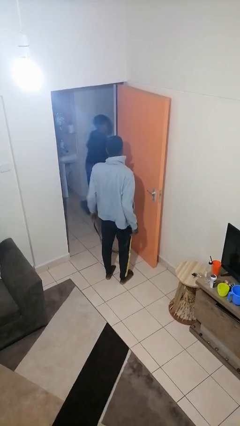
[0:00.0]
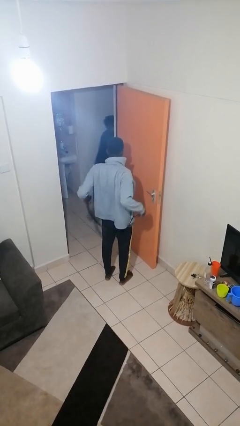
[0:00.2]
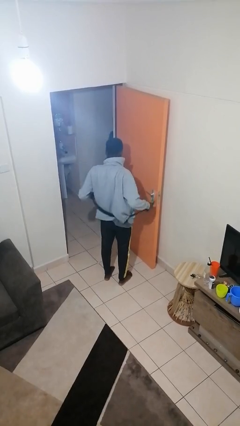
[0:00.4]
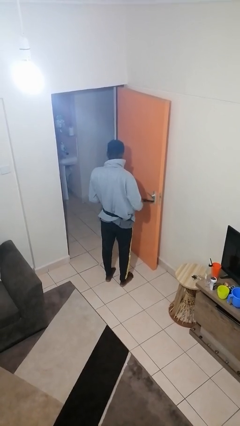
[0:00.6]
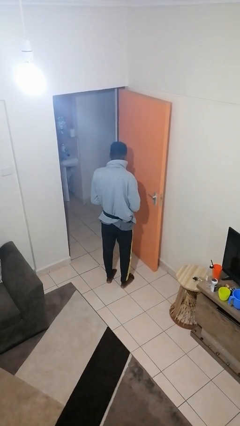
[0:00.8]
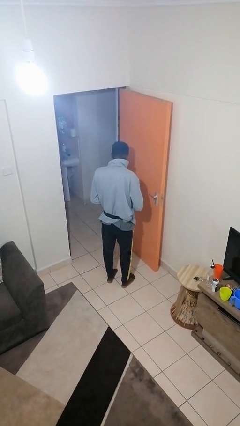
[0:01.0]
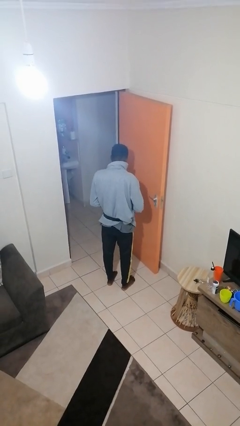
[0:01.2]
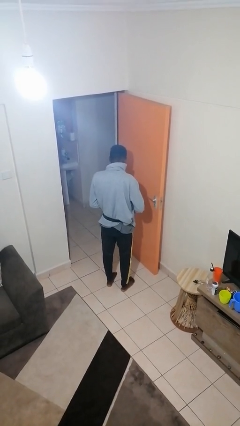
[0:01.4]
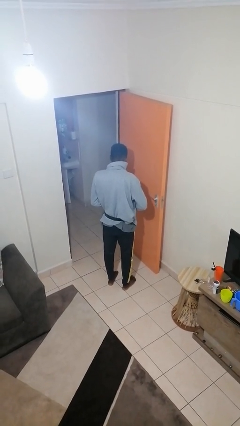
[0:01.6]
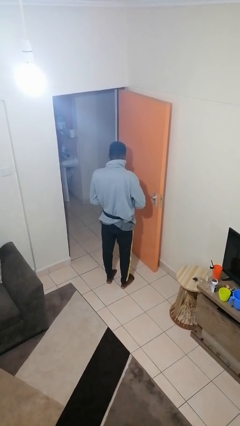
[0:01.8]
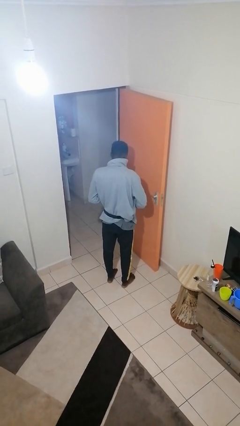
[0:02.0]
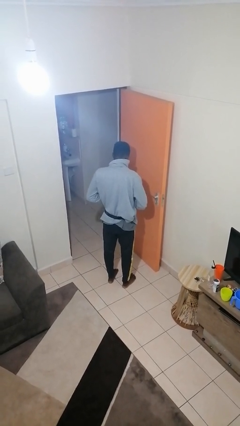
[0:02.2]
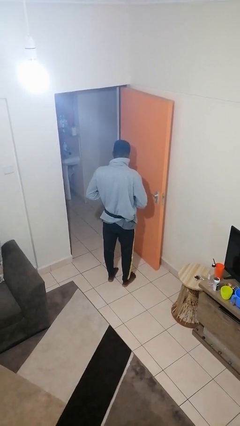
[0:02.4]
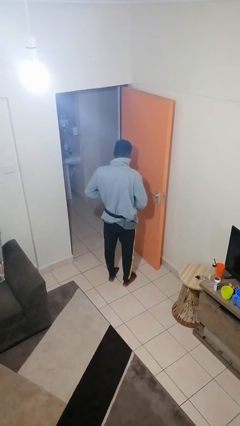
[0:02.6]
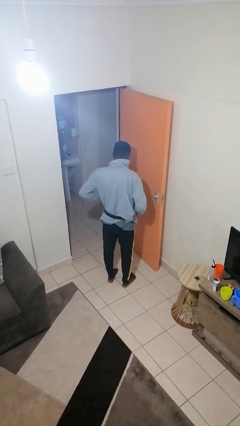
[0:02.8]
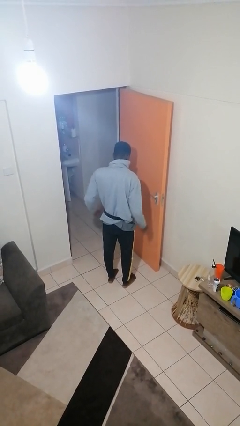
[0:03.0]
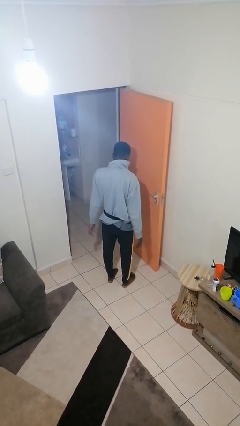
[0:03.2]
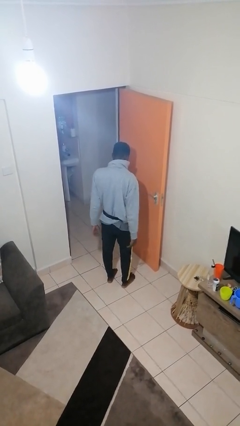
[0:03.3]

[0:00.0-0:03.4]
person puts on belt

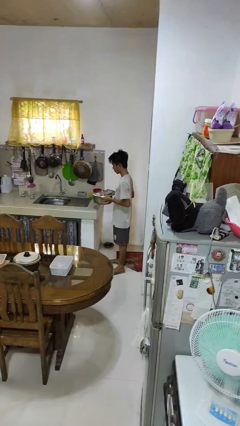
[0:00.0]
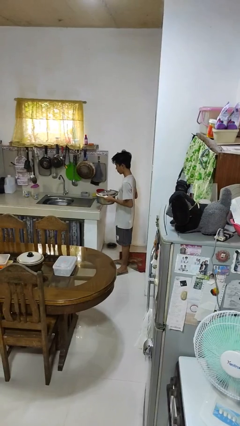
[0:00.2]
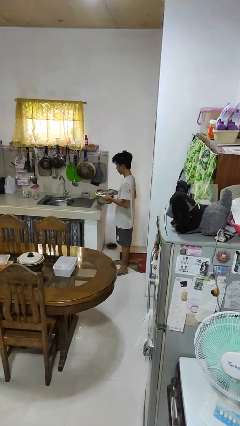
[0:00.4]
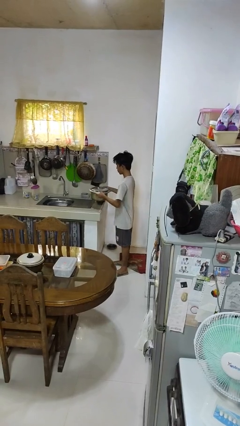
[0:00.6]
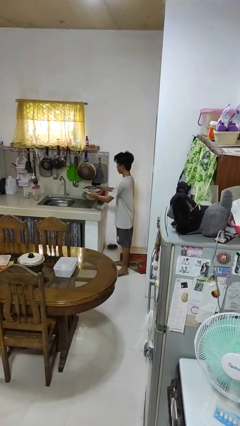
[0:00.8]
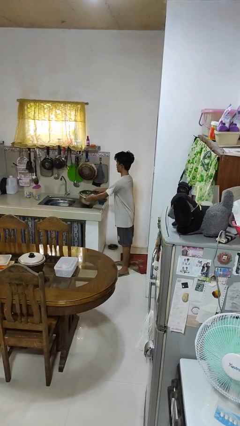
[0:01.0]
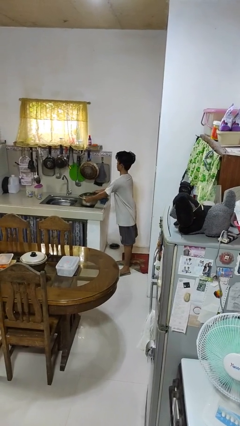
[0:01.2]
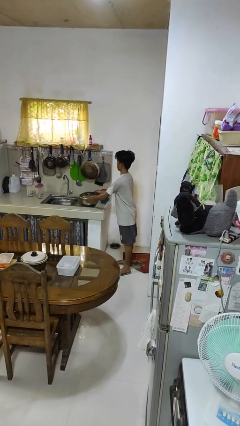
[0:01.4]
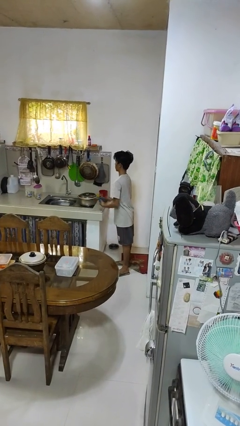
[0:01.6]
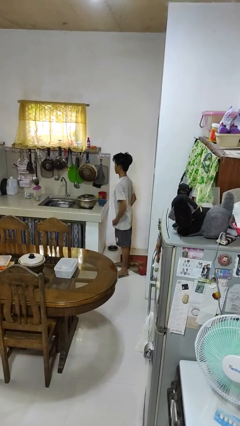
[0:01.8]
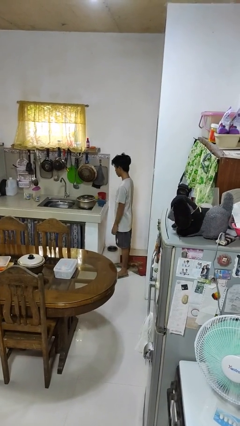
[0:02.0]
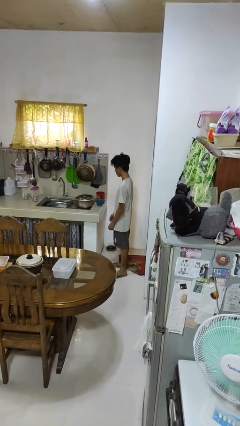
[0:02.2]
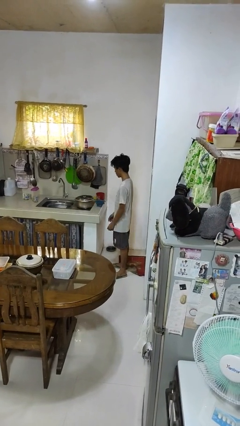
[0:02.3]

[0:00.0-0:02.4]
person puts down object on countertop

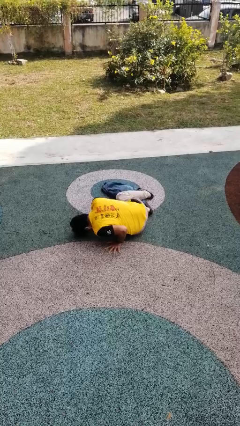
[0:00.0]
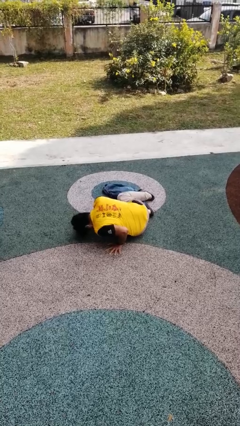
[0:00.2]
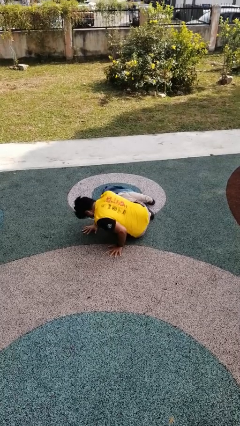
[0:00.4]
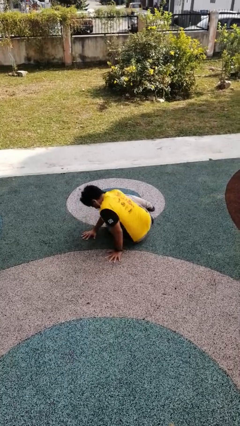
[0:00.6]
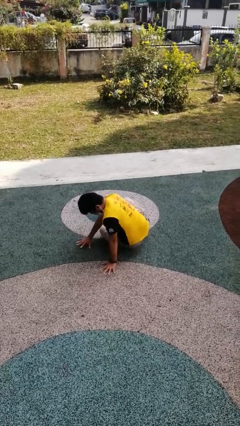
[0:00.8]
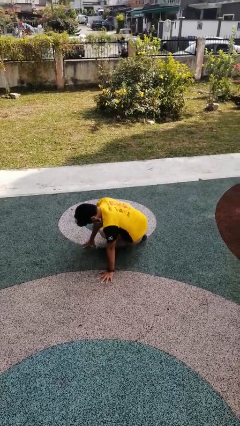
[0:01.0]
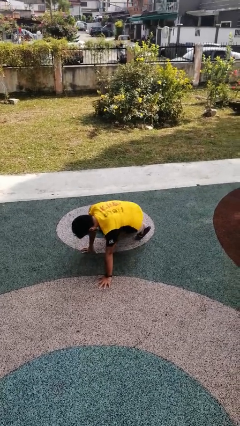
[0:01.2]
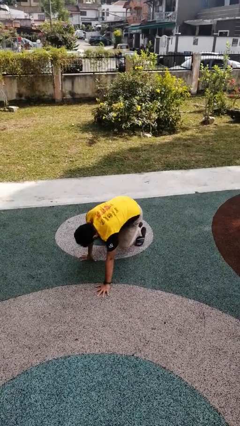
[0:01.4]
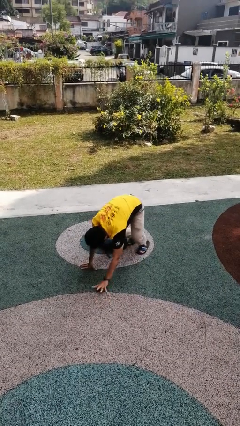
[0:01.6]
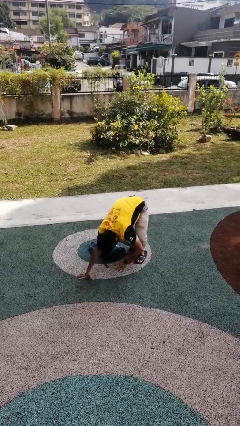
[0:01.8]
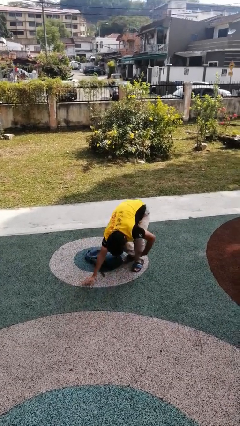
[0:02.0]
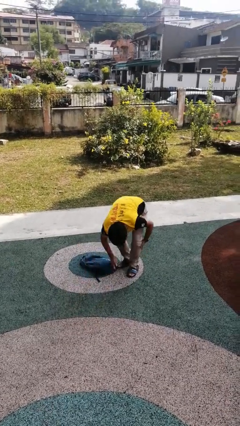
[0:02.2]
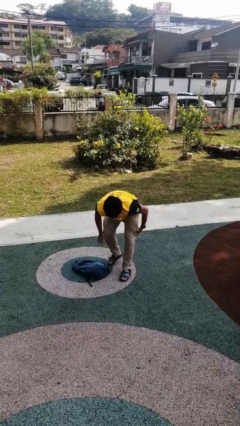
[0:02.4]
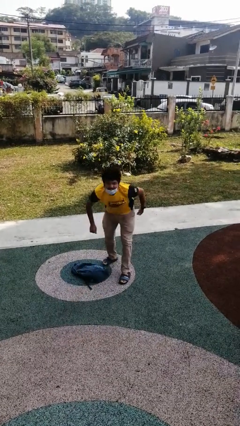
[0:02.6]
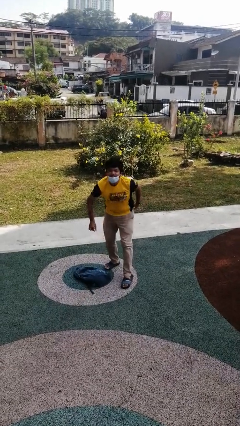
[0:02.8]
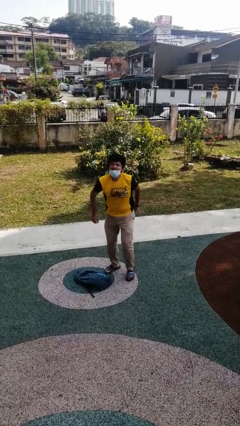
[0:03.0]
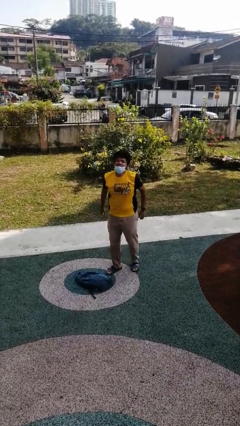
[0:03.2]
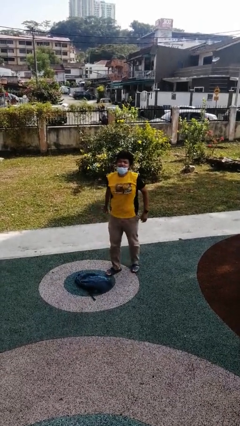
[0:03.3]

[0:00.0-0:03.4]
person stands up from floor

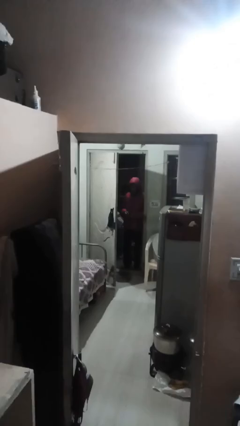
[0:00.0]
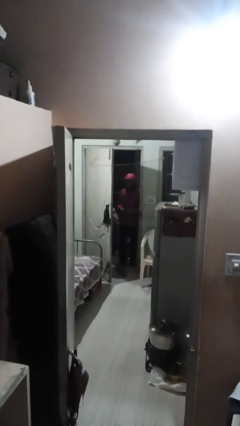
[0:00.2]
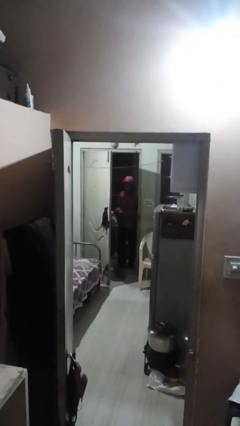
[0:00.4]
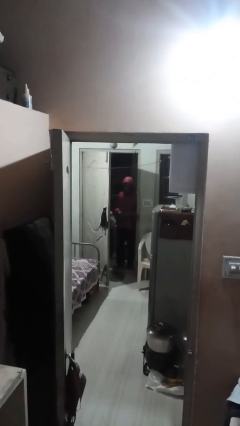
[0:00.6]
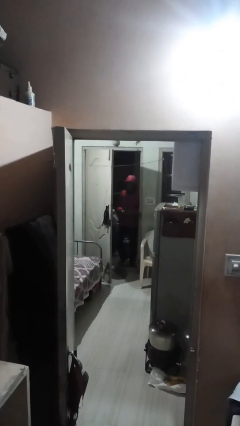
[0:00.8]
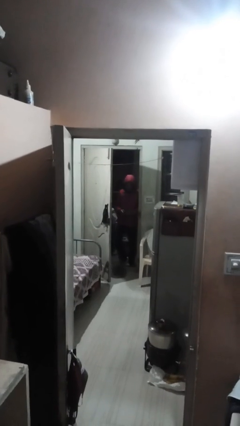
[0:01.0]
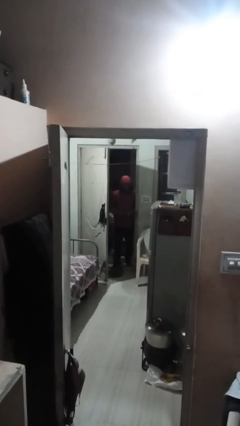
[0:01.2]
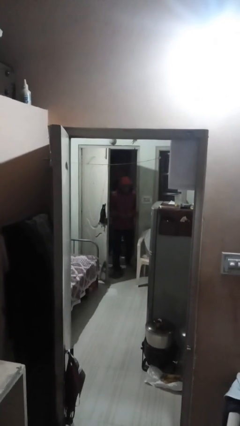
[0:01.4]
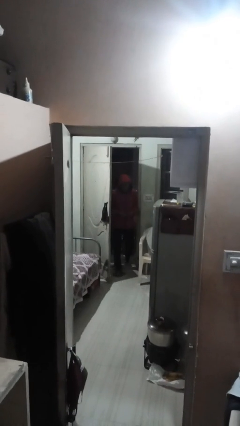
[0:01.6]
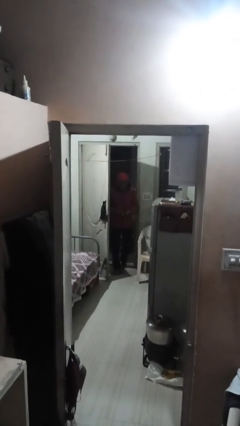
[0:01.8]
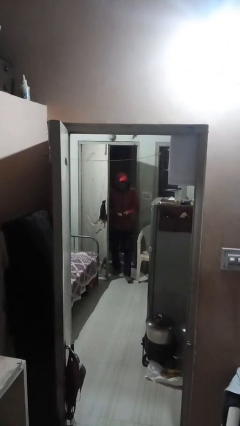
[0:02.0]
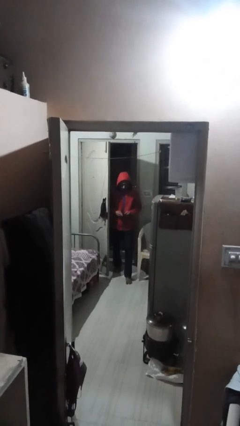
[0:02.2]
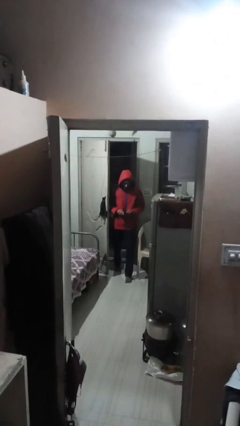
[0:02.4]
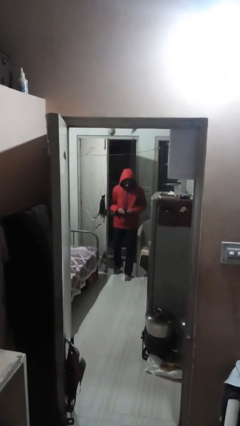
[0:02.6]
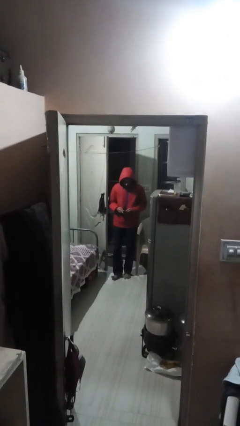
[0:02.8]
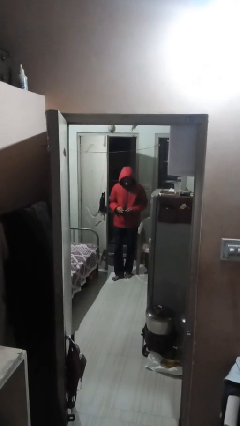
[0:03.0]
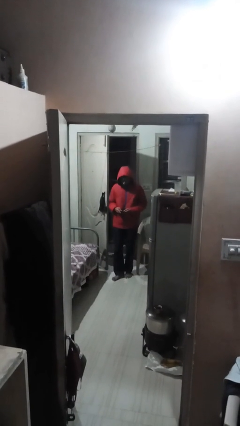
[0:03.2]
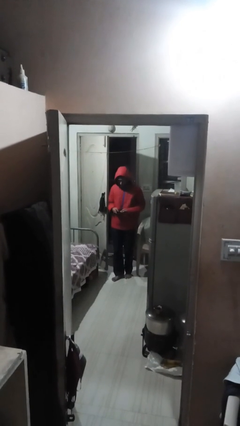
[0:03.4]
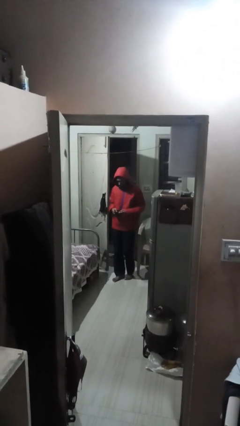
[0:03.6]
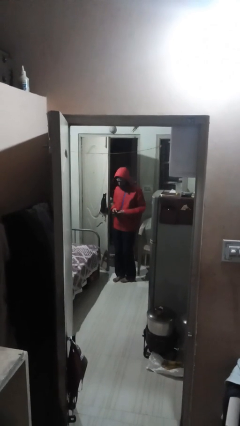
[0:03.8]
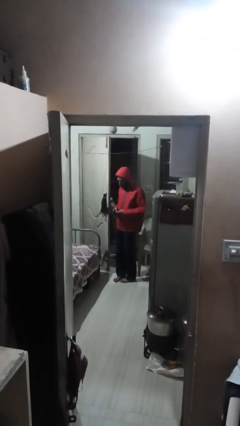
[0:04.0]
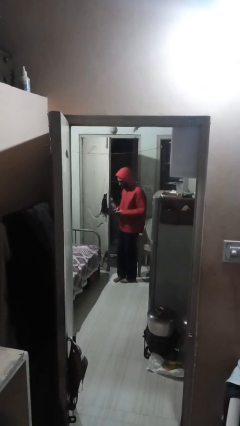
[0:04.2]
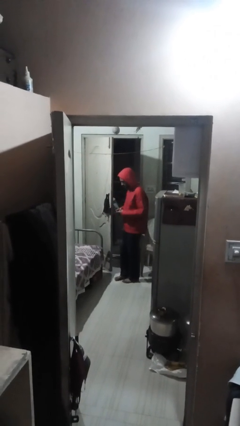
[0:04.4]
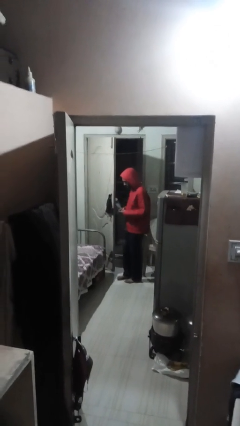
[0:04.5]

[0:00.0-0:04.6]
person enters scene through structure

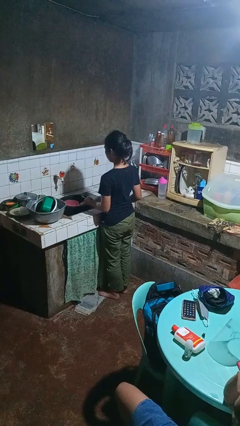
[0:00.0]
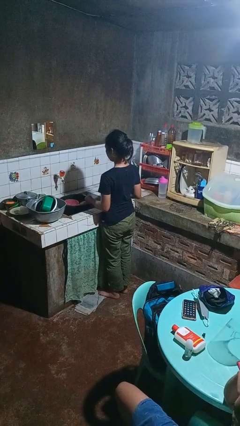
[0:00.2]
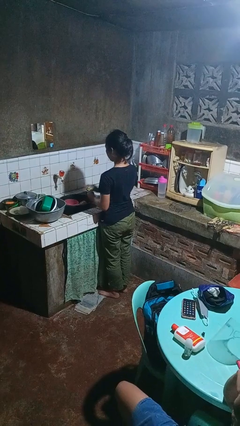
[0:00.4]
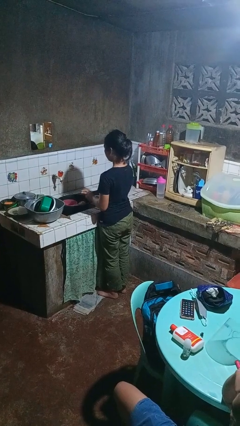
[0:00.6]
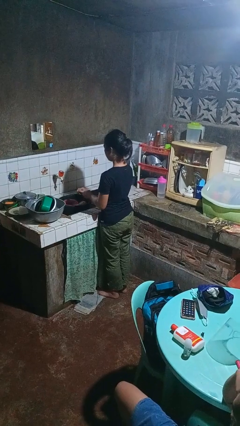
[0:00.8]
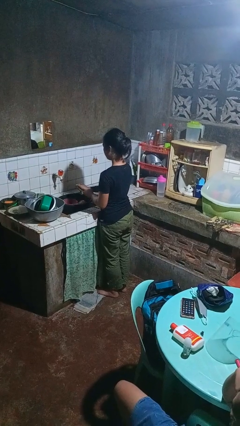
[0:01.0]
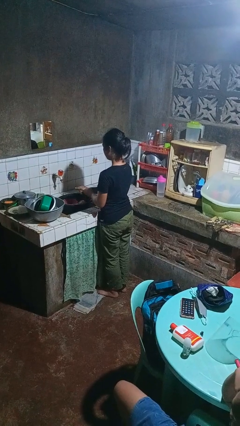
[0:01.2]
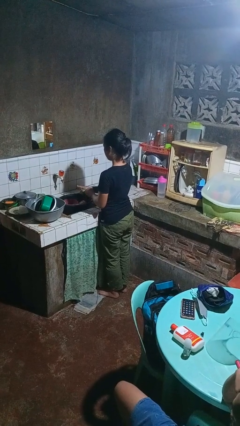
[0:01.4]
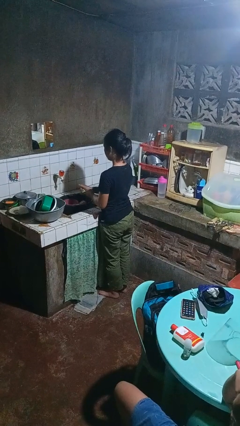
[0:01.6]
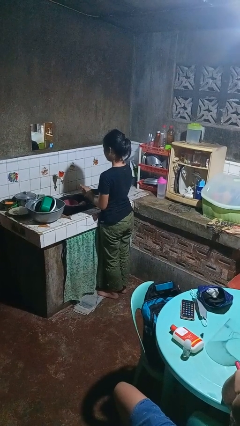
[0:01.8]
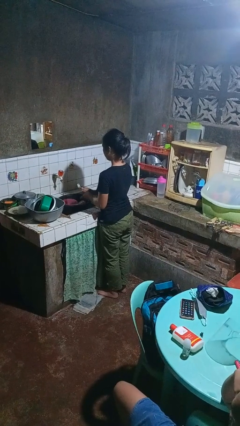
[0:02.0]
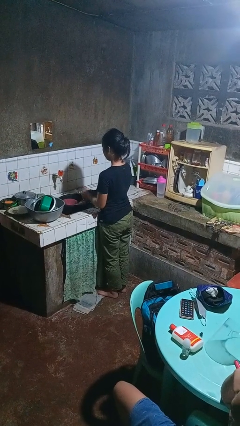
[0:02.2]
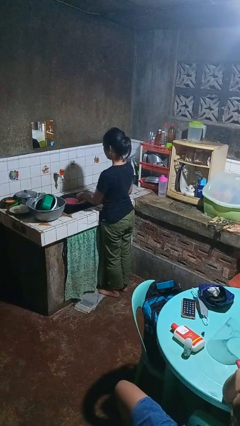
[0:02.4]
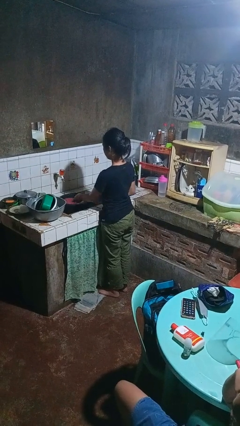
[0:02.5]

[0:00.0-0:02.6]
person washes dish

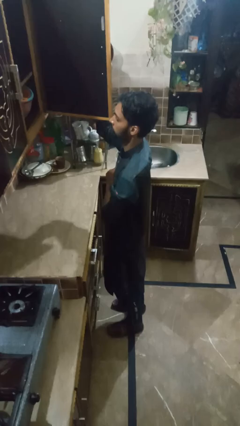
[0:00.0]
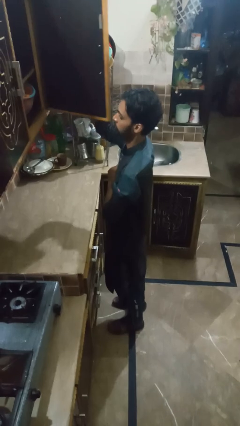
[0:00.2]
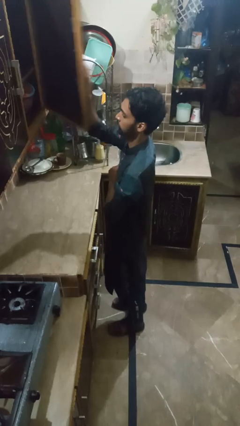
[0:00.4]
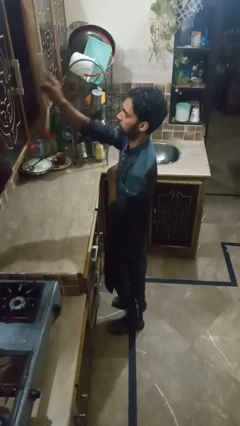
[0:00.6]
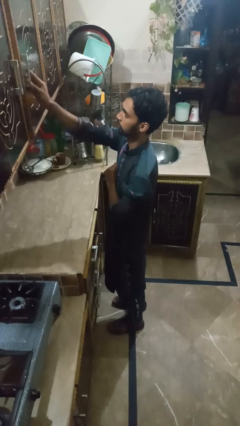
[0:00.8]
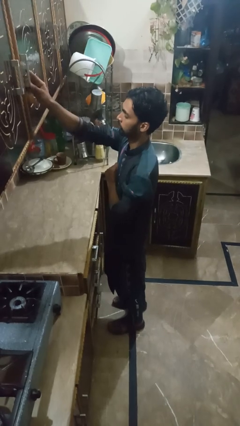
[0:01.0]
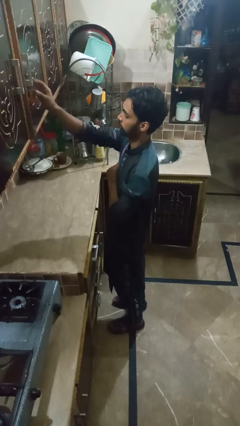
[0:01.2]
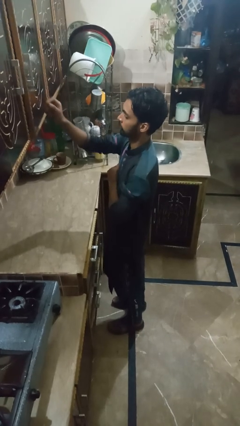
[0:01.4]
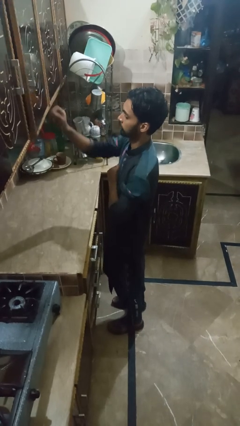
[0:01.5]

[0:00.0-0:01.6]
person closes kitchen drawer
